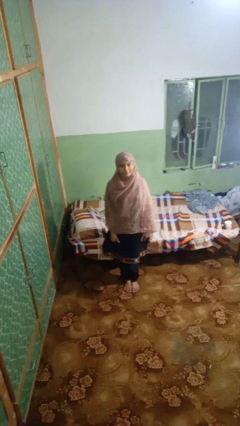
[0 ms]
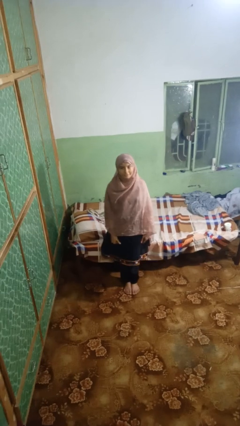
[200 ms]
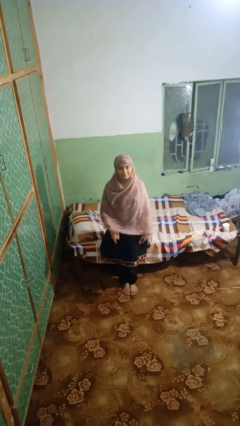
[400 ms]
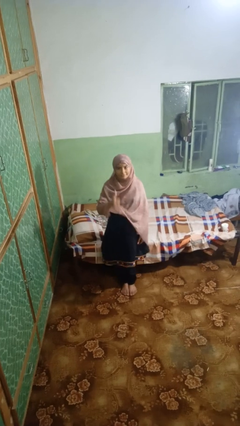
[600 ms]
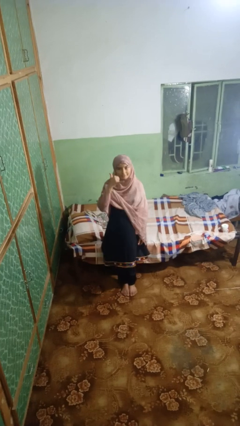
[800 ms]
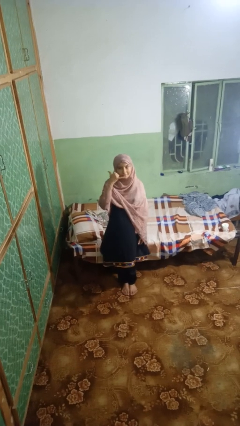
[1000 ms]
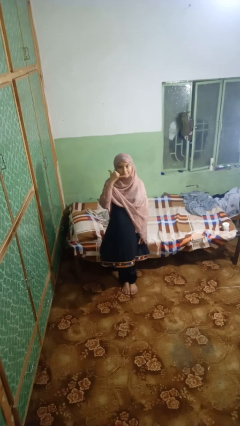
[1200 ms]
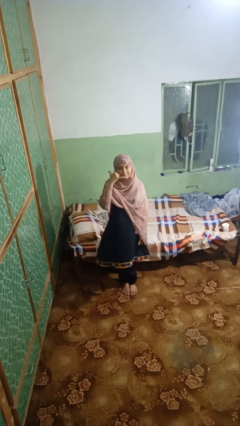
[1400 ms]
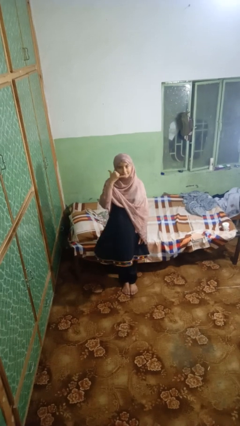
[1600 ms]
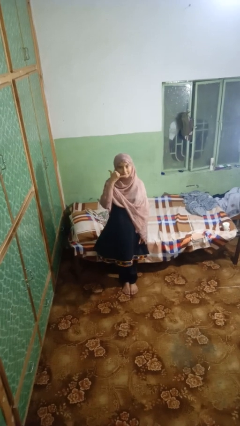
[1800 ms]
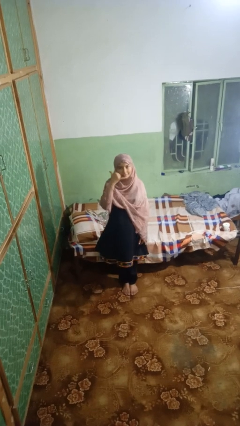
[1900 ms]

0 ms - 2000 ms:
person gestures call me

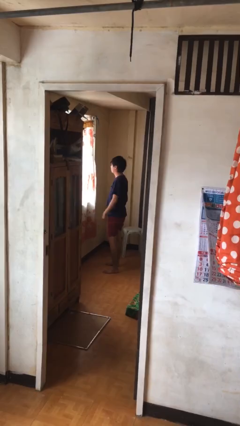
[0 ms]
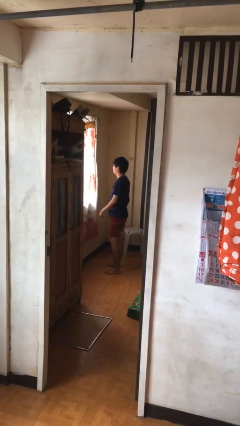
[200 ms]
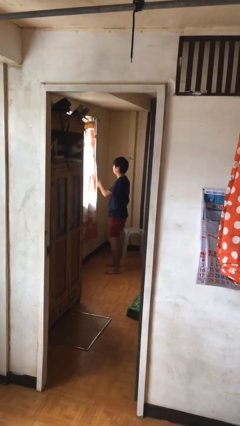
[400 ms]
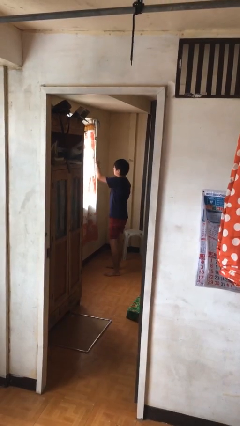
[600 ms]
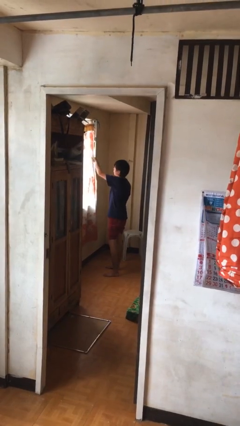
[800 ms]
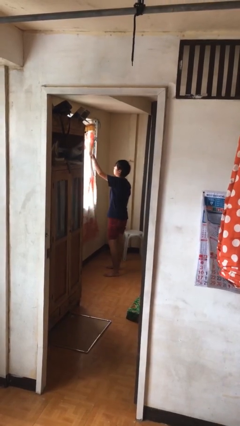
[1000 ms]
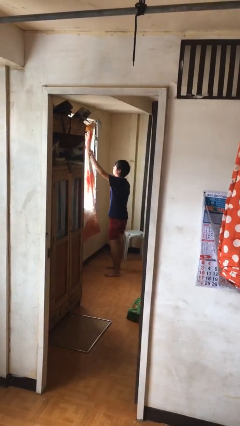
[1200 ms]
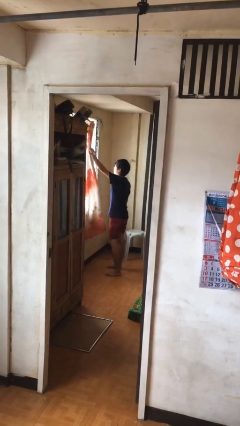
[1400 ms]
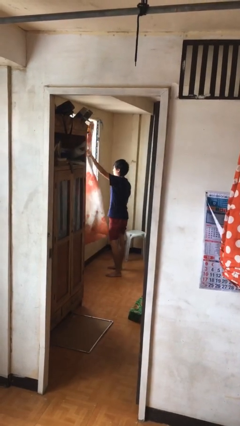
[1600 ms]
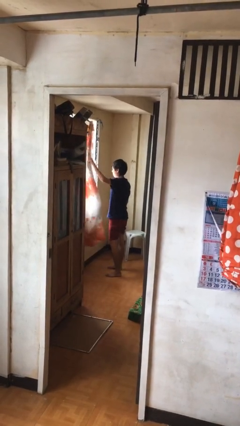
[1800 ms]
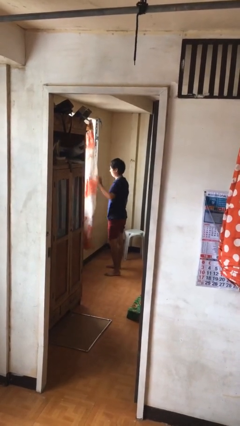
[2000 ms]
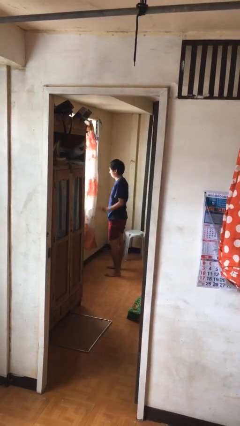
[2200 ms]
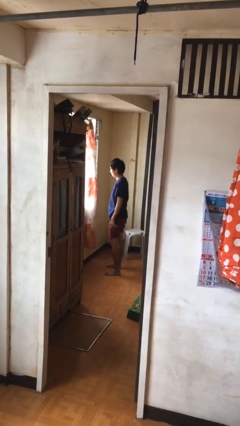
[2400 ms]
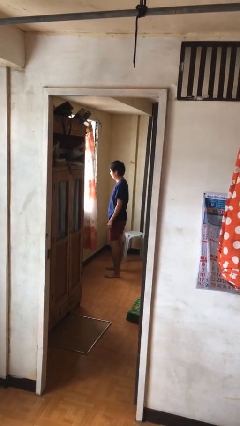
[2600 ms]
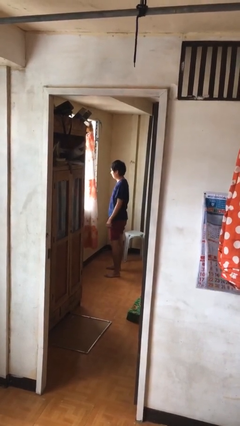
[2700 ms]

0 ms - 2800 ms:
person opens curtains

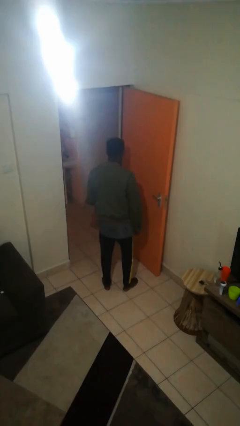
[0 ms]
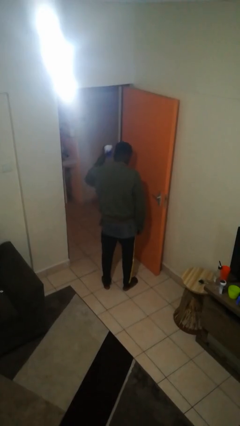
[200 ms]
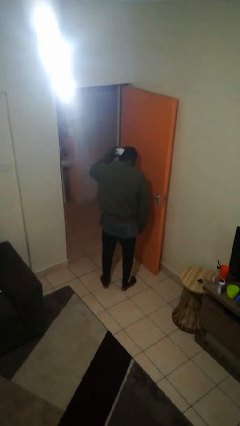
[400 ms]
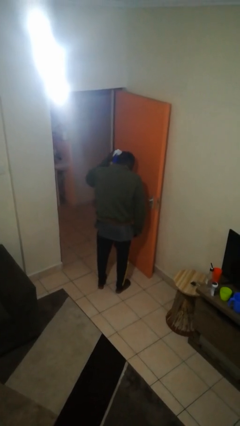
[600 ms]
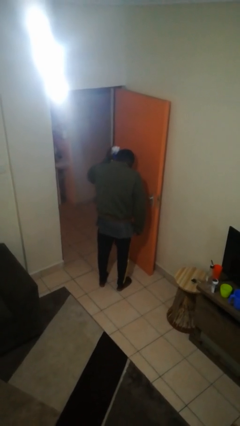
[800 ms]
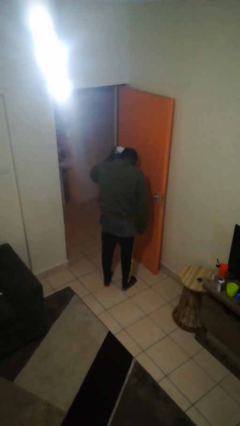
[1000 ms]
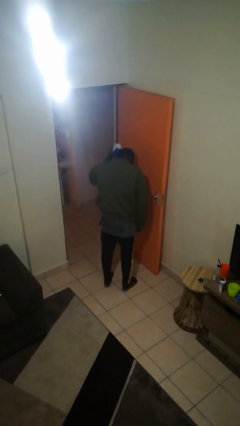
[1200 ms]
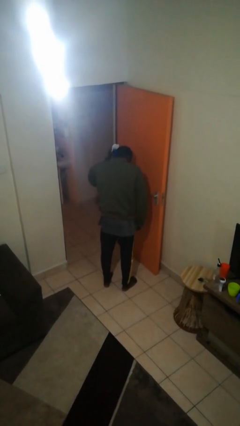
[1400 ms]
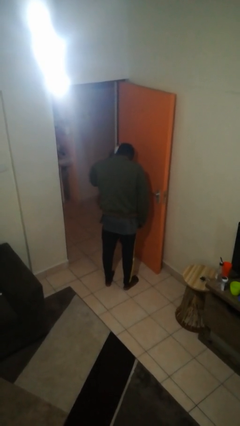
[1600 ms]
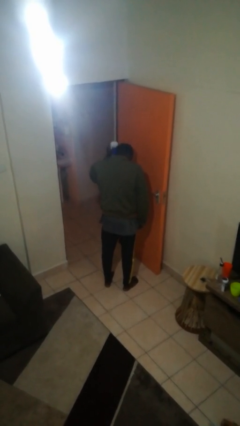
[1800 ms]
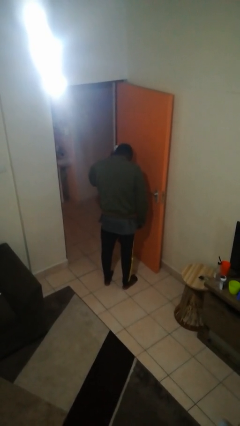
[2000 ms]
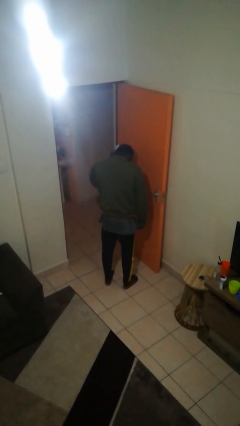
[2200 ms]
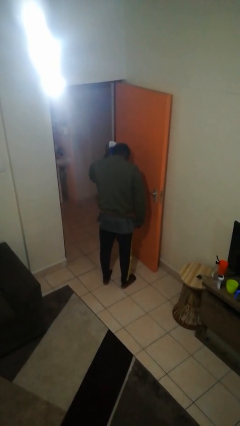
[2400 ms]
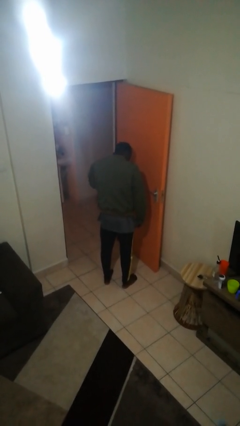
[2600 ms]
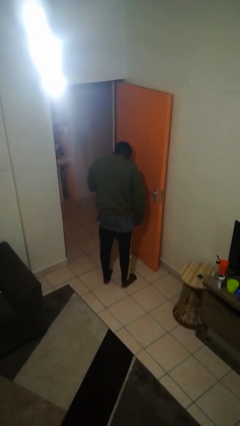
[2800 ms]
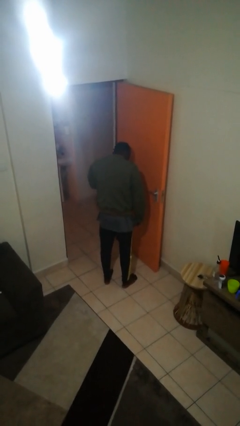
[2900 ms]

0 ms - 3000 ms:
person brushes hair

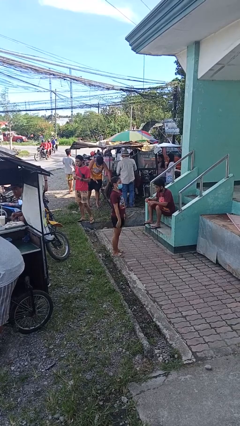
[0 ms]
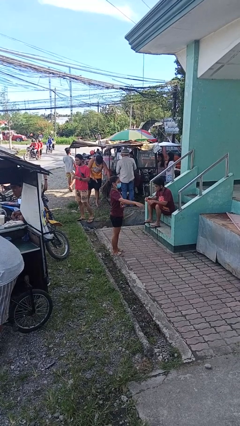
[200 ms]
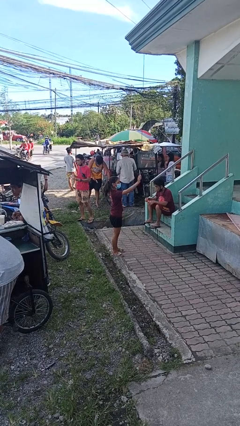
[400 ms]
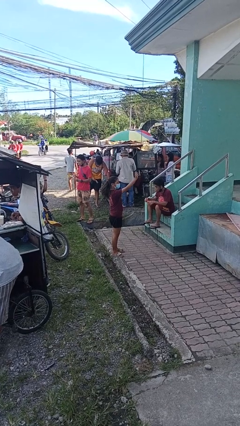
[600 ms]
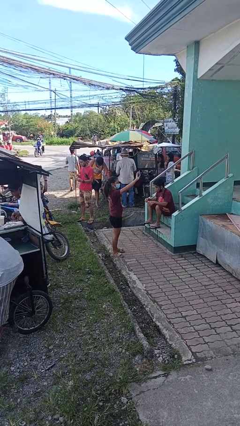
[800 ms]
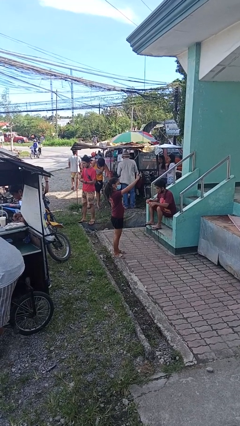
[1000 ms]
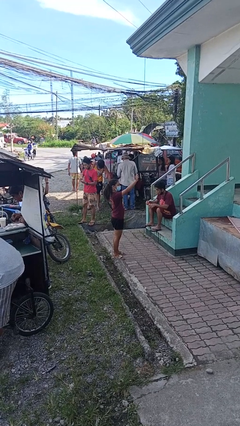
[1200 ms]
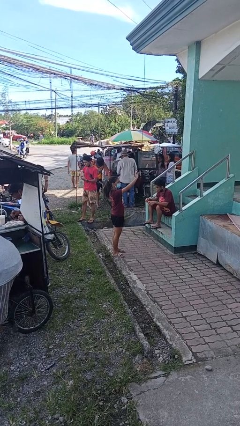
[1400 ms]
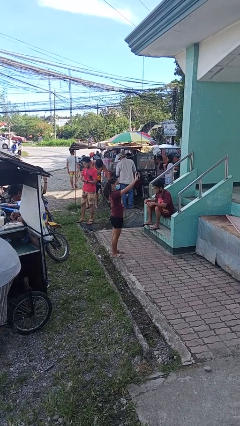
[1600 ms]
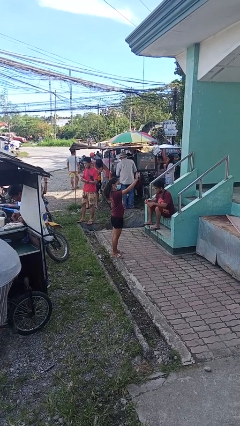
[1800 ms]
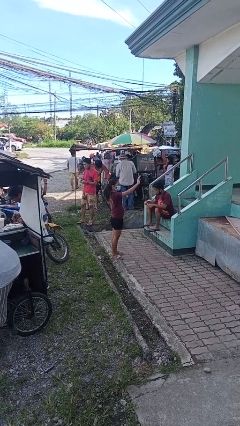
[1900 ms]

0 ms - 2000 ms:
person waves at person

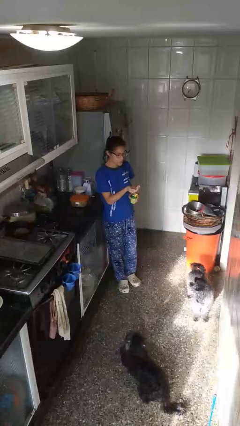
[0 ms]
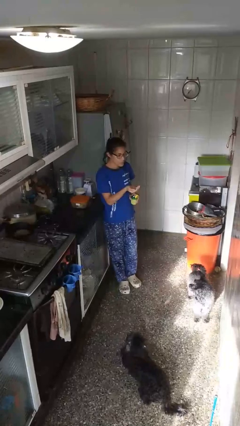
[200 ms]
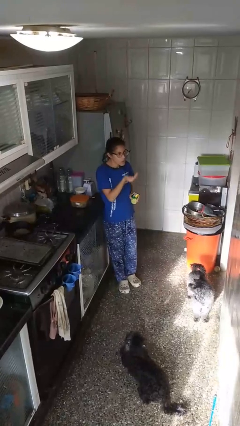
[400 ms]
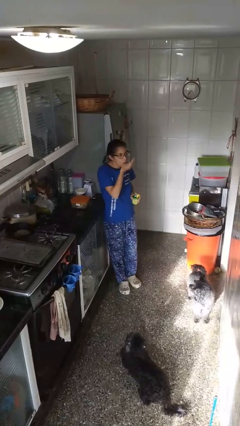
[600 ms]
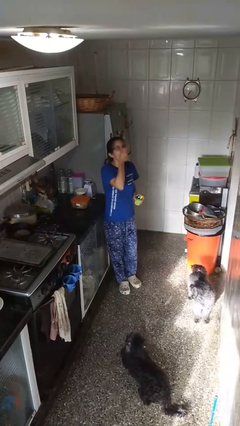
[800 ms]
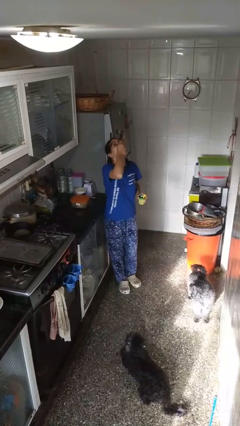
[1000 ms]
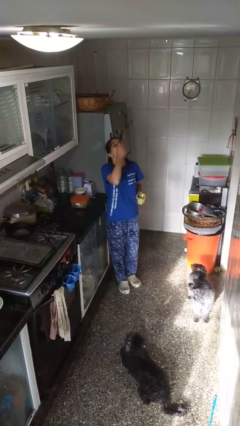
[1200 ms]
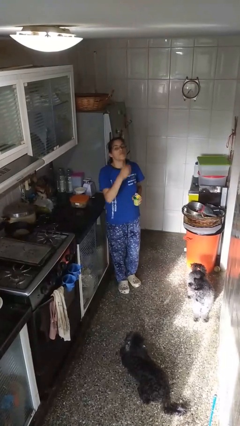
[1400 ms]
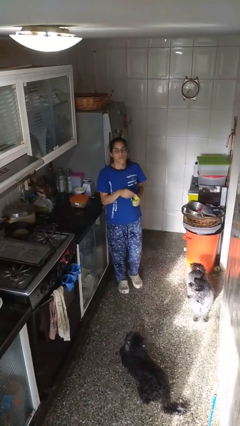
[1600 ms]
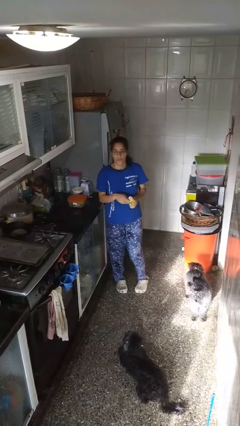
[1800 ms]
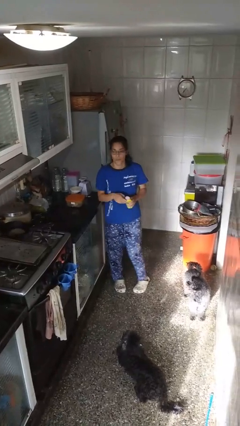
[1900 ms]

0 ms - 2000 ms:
person drinks from cup

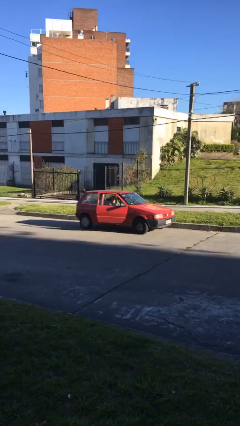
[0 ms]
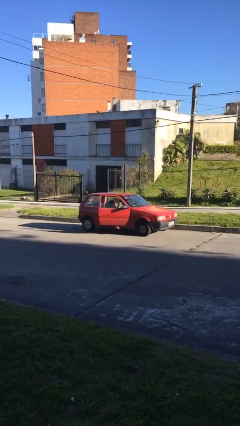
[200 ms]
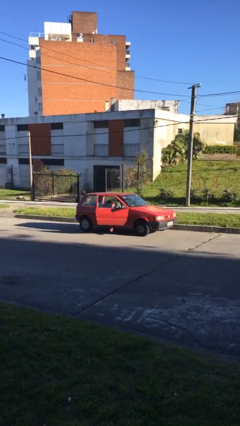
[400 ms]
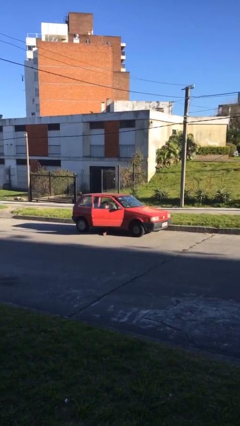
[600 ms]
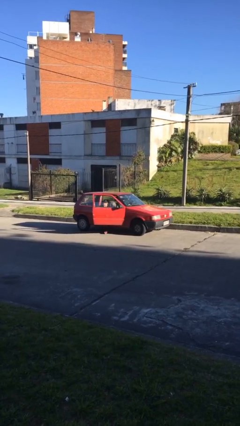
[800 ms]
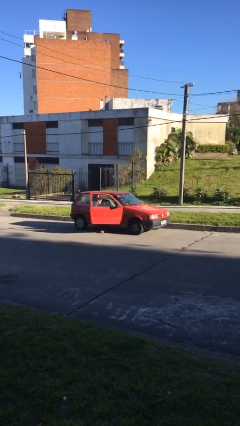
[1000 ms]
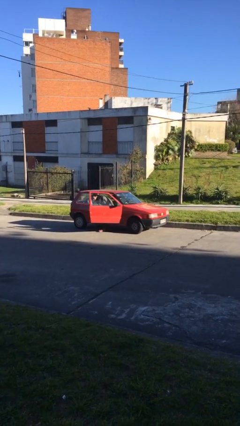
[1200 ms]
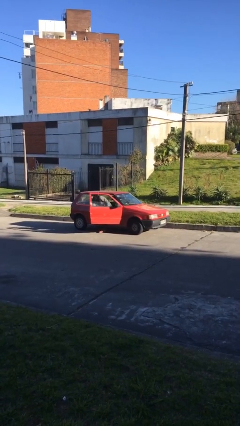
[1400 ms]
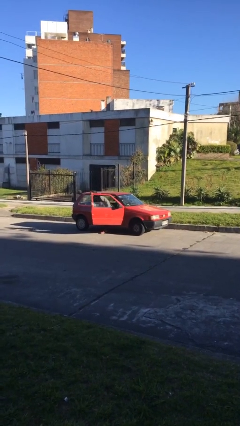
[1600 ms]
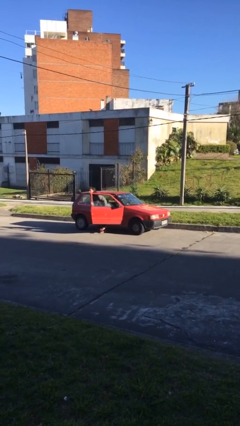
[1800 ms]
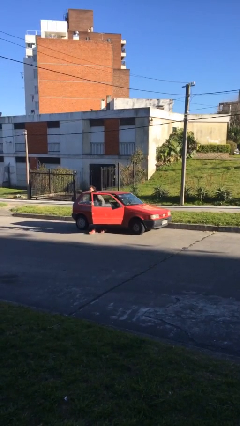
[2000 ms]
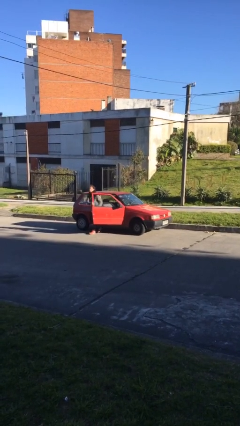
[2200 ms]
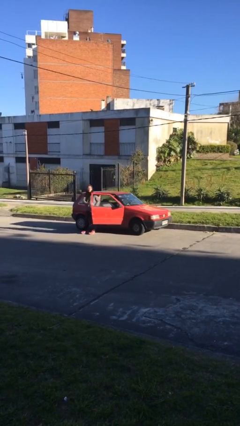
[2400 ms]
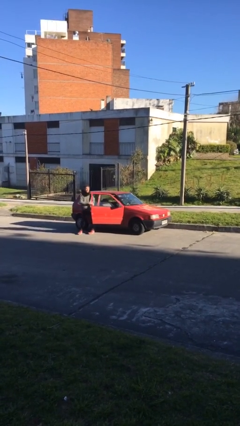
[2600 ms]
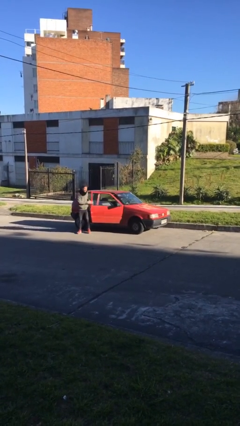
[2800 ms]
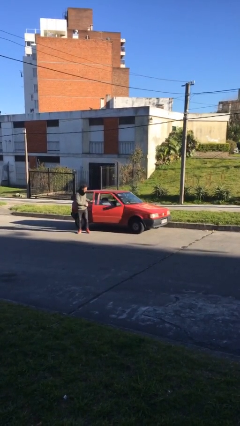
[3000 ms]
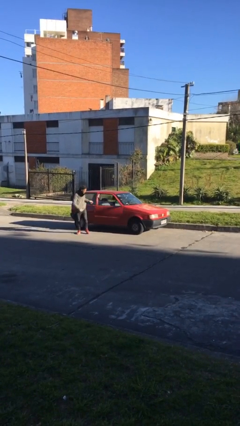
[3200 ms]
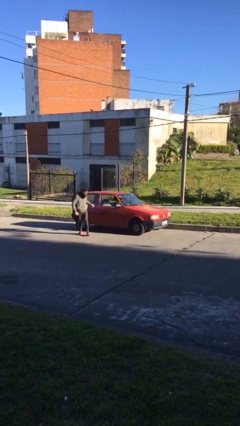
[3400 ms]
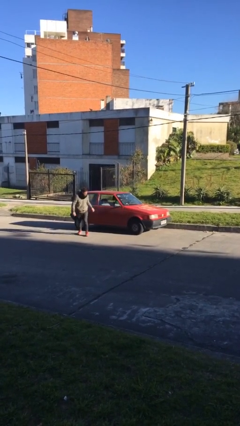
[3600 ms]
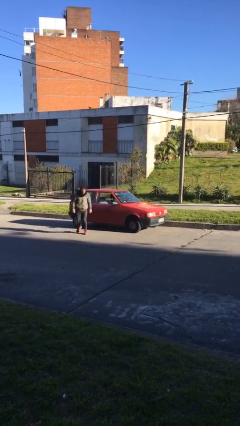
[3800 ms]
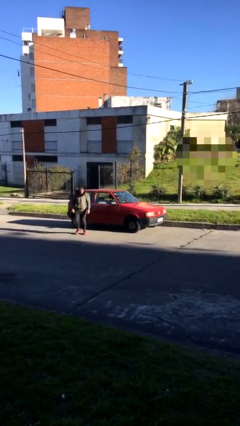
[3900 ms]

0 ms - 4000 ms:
car drops off person

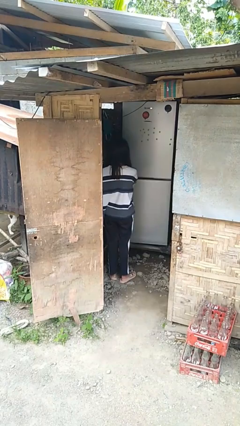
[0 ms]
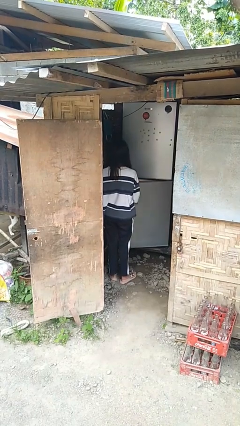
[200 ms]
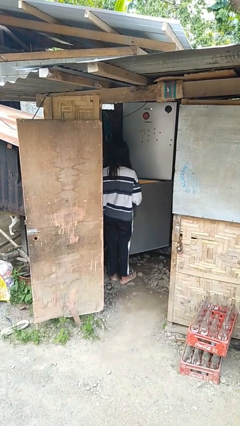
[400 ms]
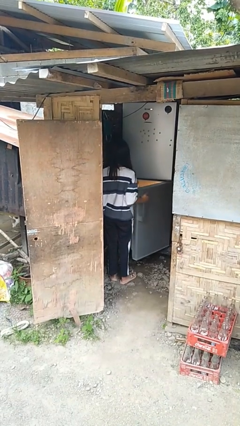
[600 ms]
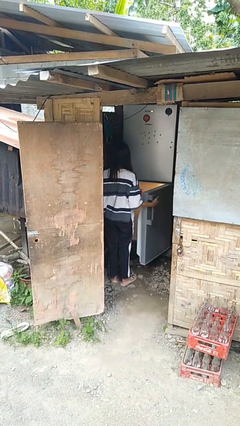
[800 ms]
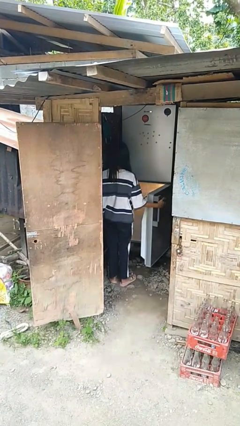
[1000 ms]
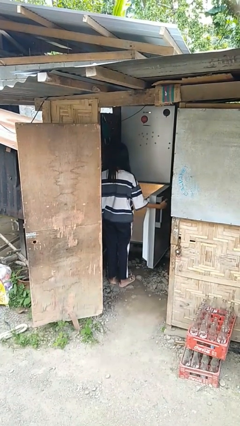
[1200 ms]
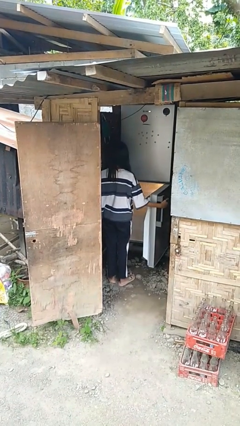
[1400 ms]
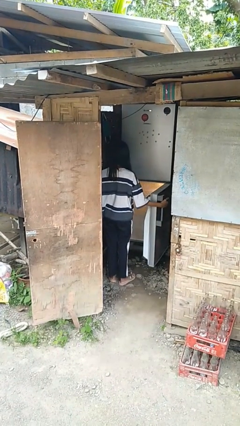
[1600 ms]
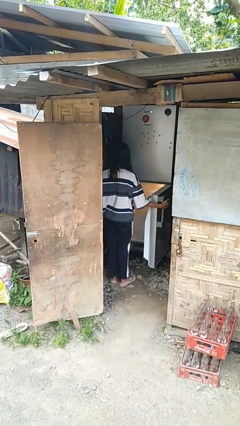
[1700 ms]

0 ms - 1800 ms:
person opens refrigerator
